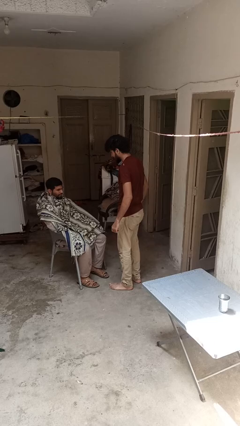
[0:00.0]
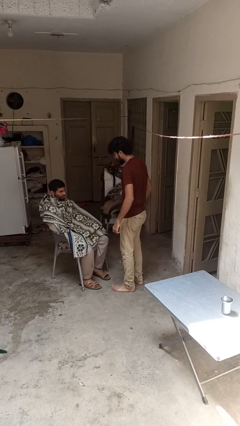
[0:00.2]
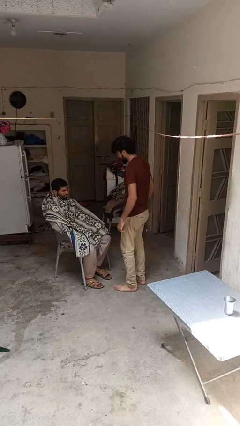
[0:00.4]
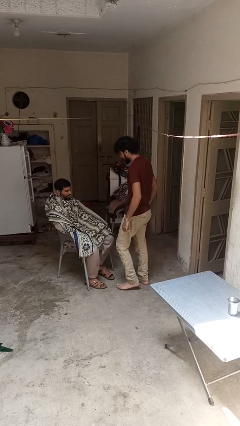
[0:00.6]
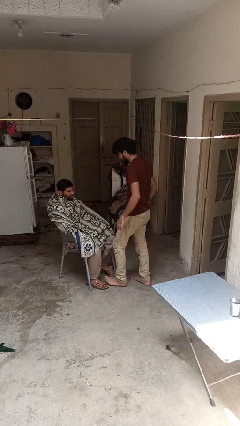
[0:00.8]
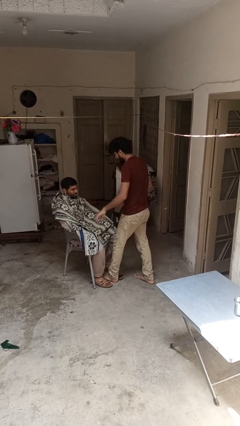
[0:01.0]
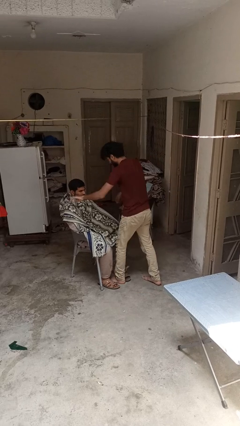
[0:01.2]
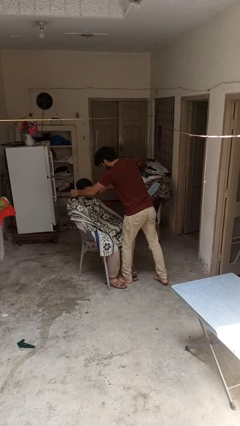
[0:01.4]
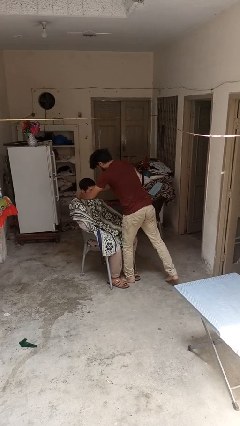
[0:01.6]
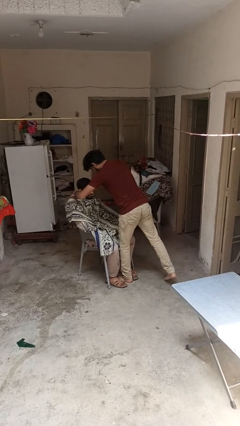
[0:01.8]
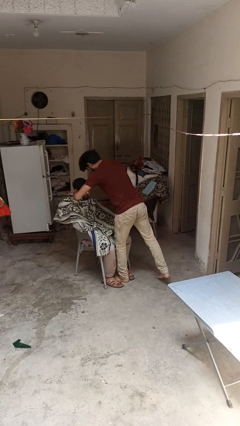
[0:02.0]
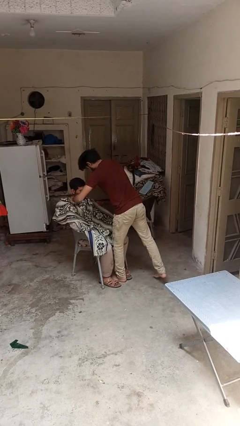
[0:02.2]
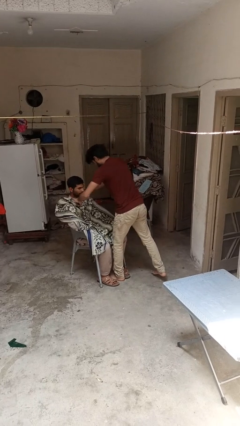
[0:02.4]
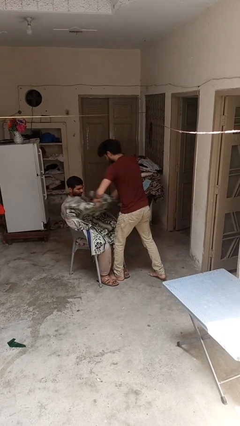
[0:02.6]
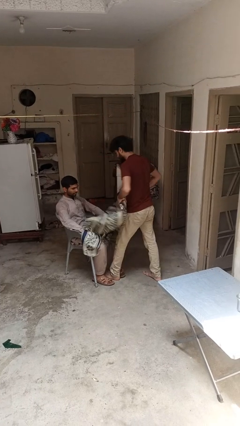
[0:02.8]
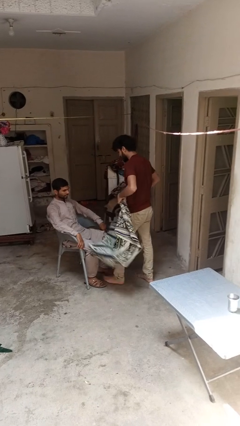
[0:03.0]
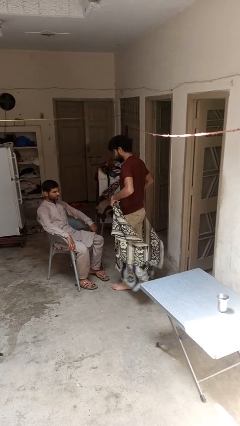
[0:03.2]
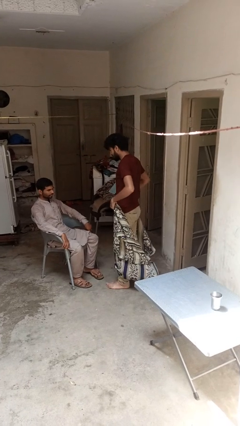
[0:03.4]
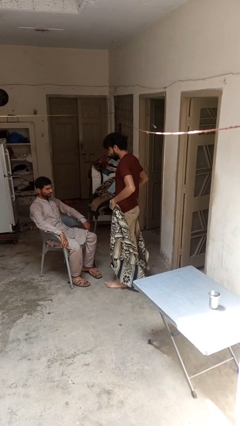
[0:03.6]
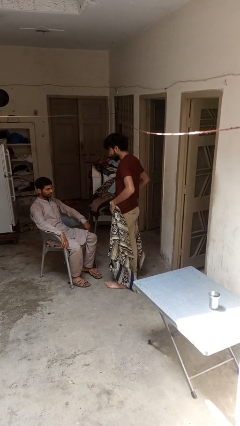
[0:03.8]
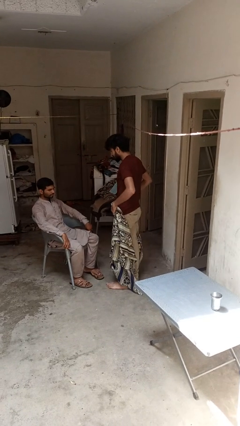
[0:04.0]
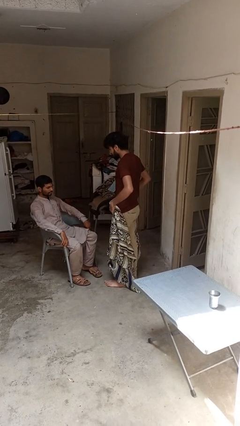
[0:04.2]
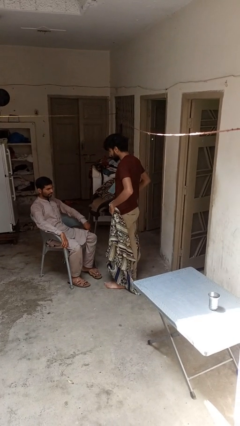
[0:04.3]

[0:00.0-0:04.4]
person uncovers friend with blanket

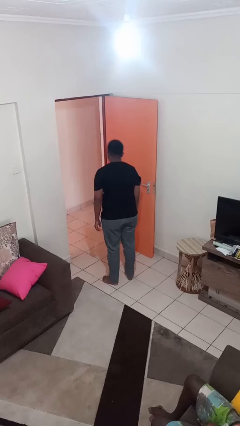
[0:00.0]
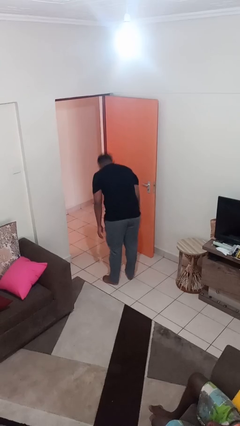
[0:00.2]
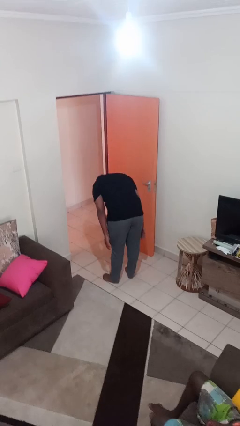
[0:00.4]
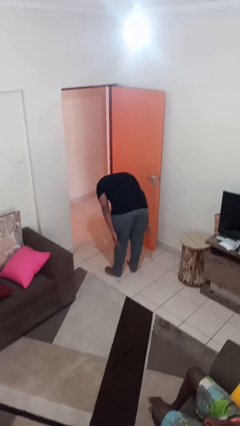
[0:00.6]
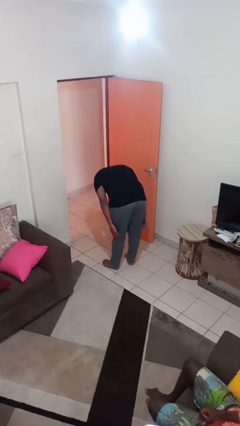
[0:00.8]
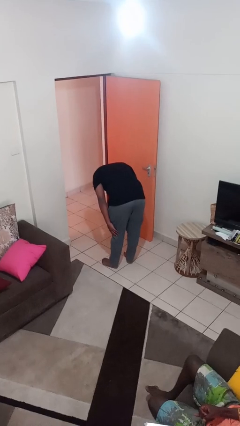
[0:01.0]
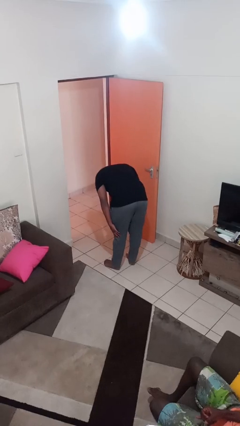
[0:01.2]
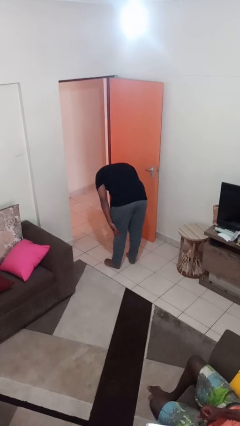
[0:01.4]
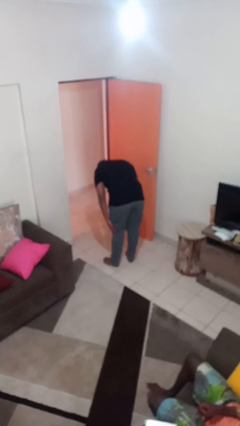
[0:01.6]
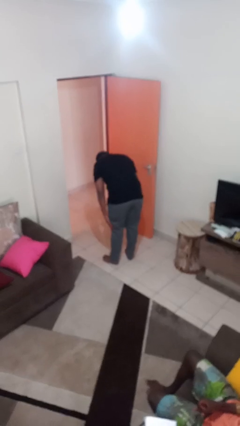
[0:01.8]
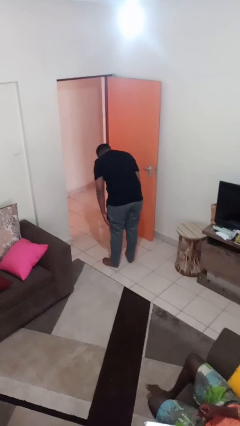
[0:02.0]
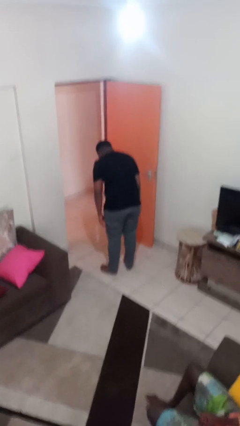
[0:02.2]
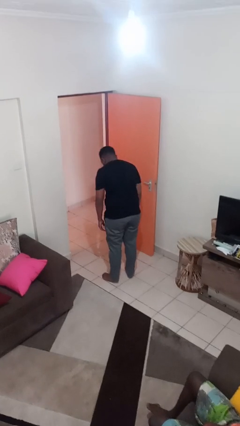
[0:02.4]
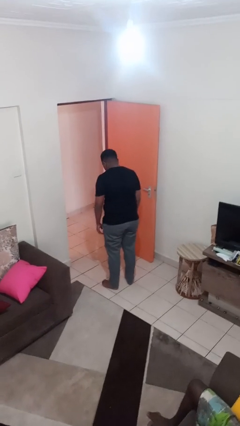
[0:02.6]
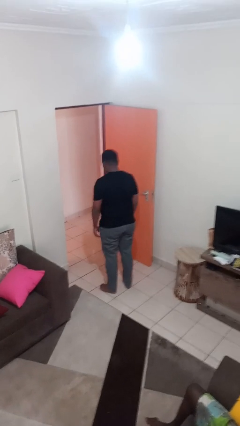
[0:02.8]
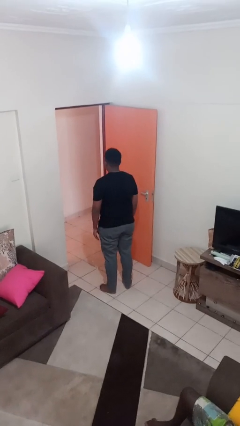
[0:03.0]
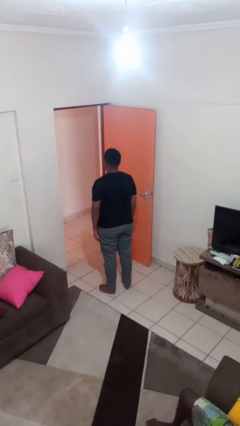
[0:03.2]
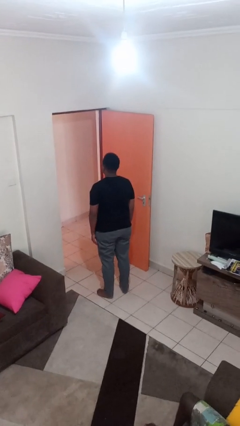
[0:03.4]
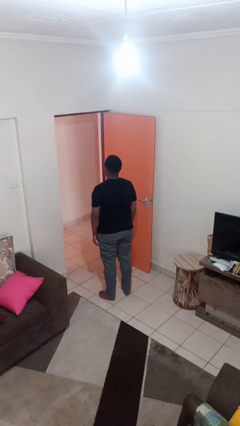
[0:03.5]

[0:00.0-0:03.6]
person bows

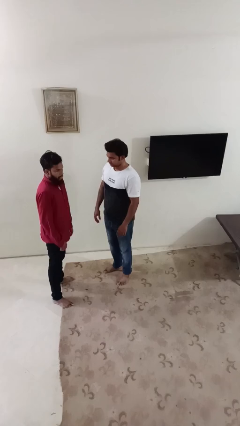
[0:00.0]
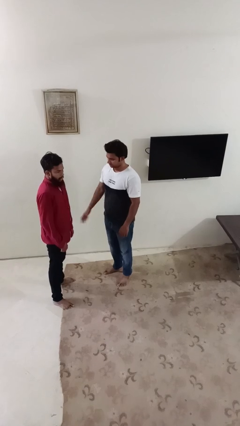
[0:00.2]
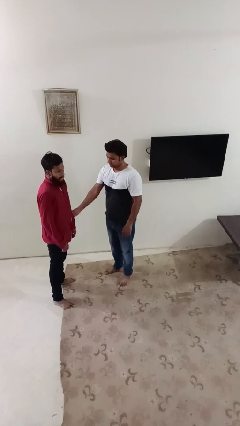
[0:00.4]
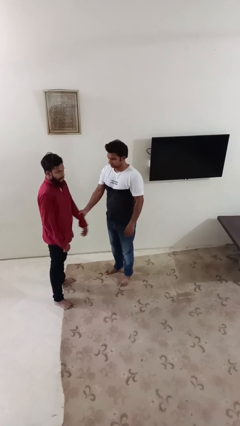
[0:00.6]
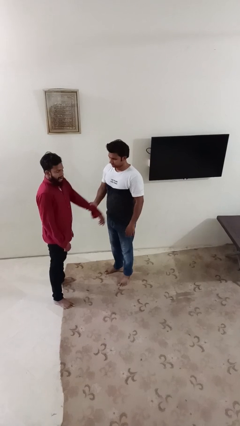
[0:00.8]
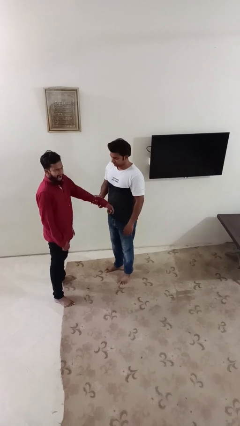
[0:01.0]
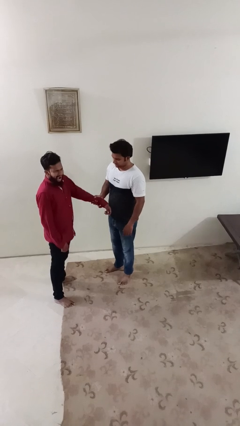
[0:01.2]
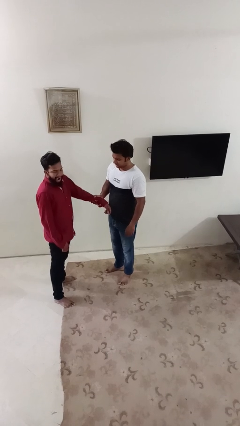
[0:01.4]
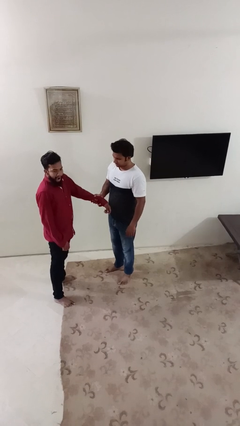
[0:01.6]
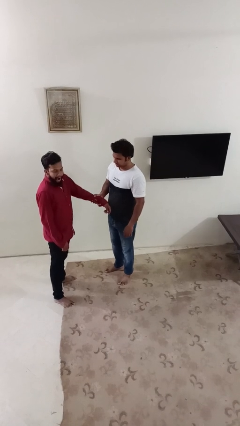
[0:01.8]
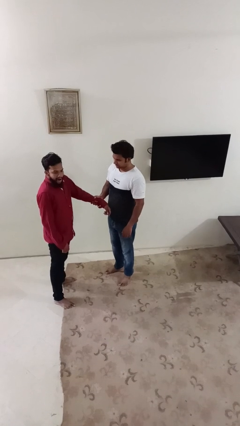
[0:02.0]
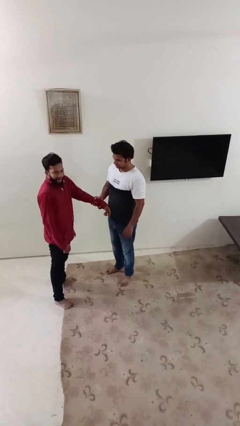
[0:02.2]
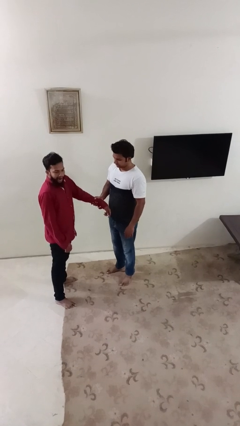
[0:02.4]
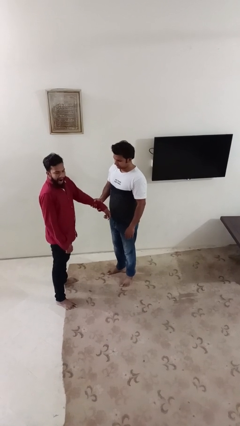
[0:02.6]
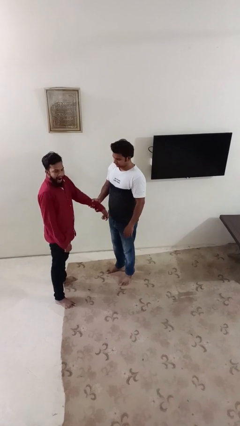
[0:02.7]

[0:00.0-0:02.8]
person grabs person by forearm

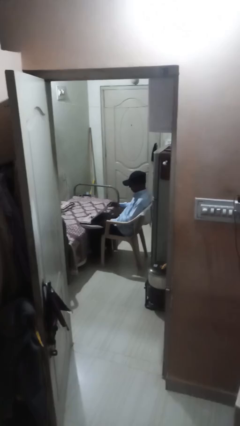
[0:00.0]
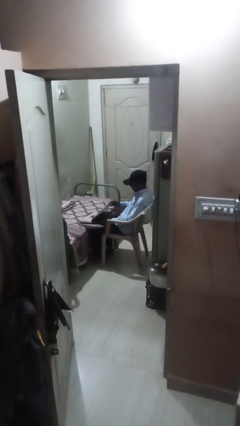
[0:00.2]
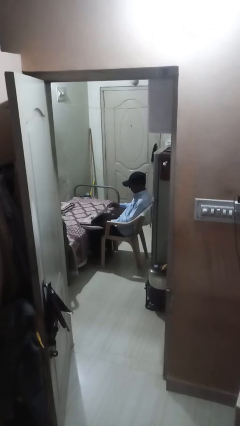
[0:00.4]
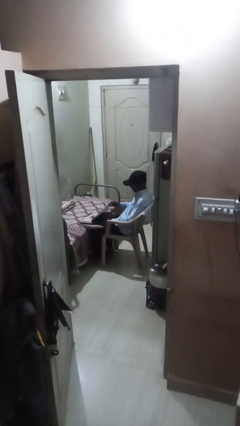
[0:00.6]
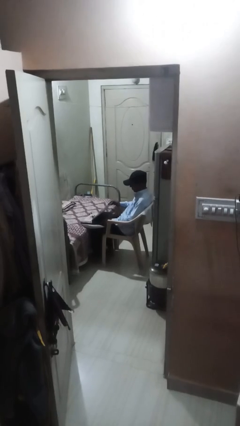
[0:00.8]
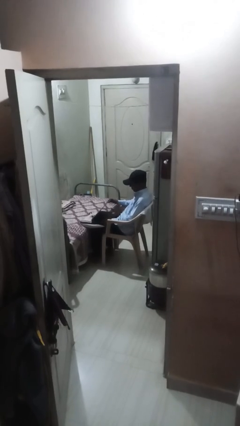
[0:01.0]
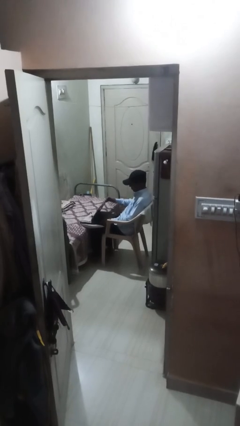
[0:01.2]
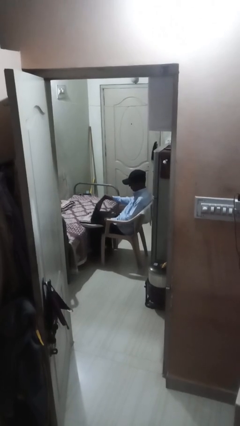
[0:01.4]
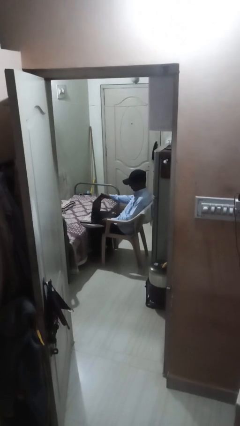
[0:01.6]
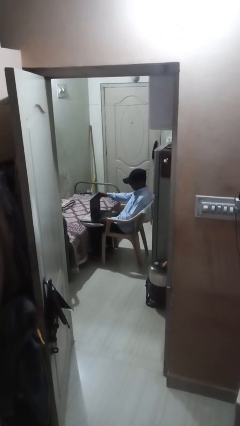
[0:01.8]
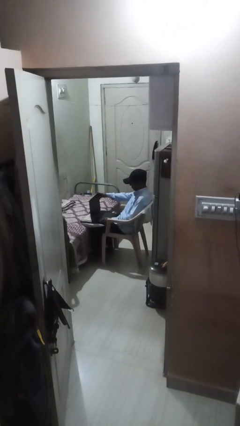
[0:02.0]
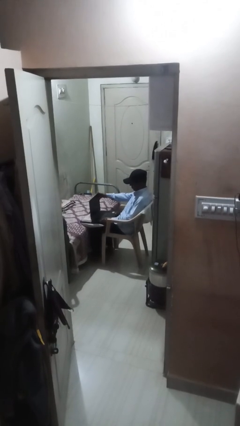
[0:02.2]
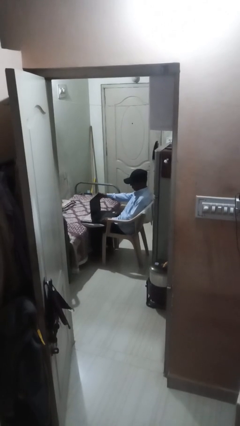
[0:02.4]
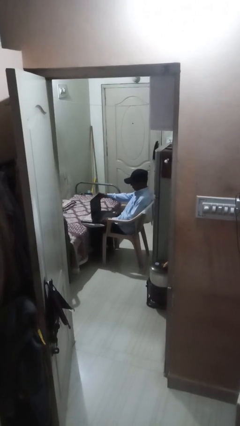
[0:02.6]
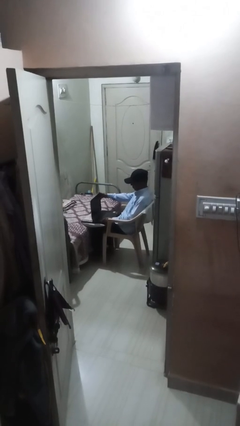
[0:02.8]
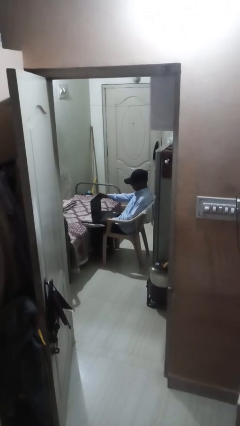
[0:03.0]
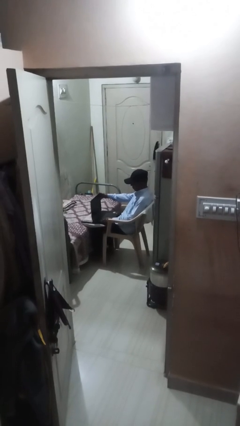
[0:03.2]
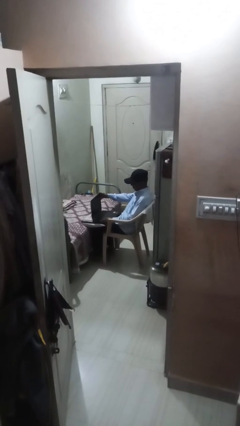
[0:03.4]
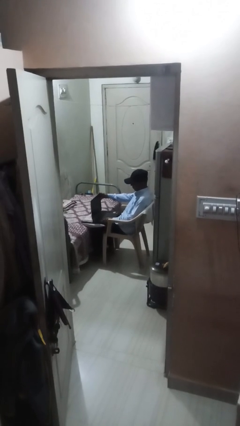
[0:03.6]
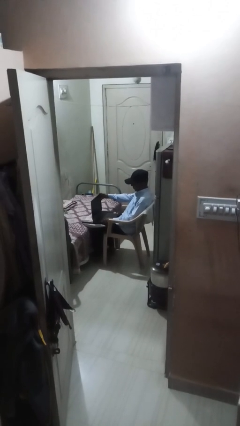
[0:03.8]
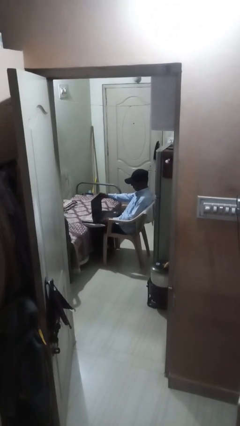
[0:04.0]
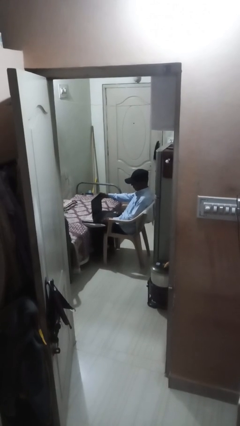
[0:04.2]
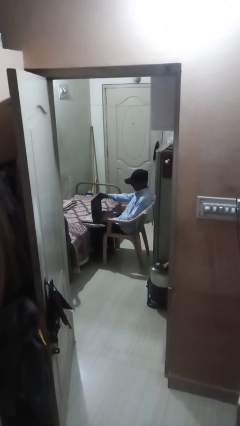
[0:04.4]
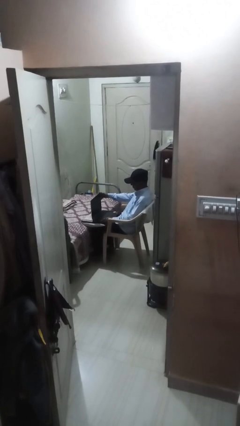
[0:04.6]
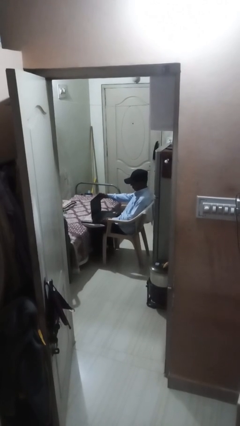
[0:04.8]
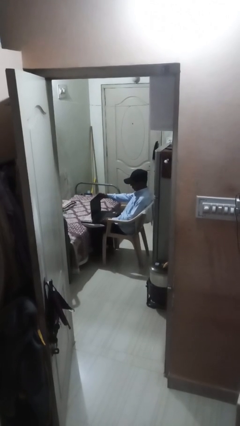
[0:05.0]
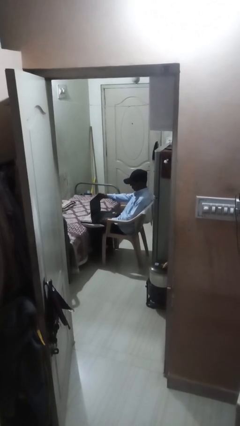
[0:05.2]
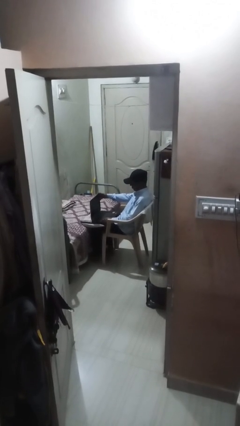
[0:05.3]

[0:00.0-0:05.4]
person interacts with laptop

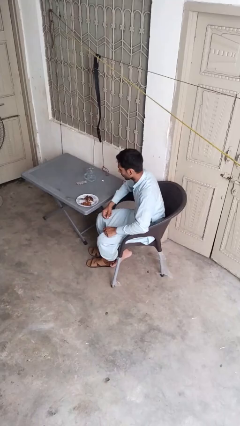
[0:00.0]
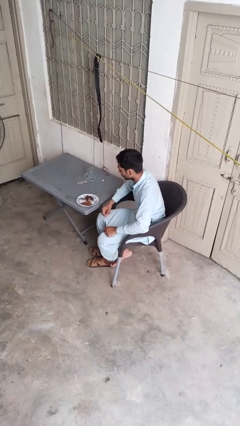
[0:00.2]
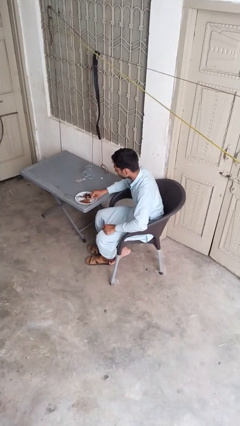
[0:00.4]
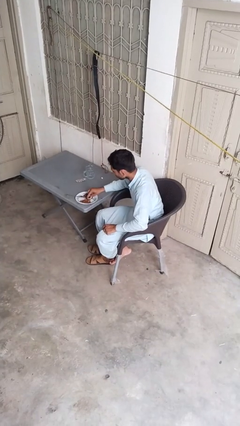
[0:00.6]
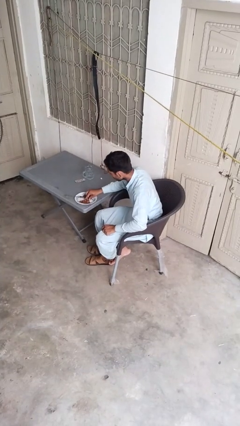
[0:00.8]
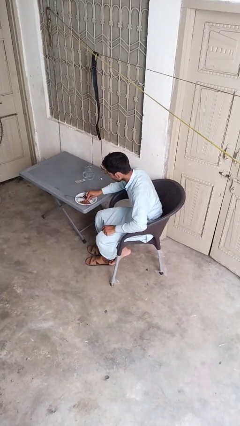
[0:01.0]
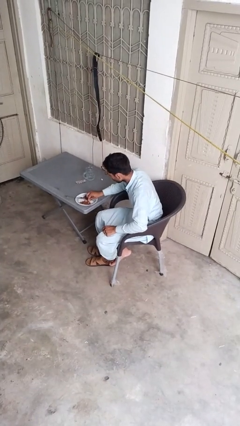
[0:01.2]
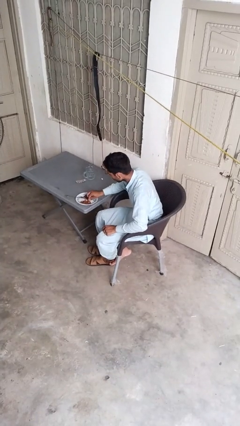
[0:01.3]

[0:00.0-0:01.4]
person eats with hands

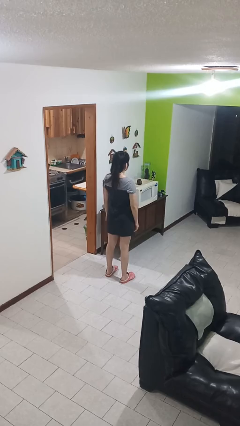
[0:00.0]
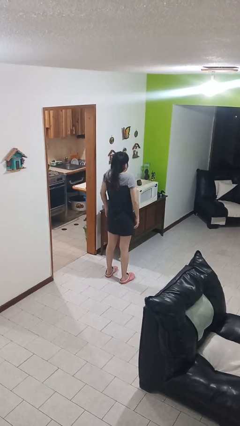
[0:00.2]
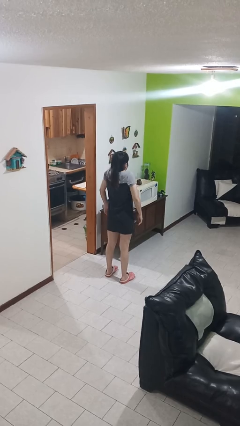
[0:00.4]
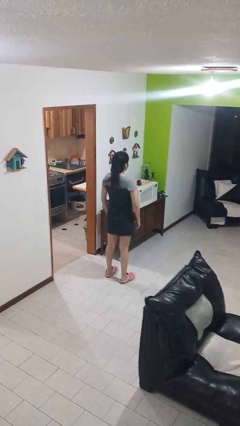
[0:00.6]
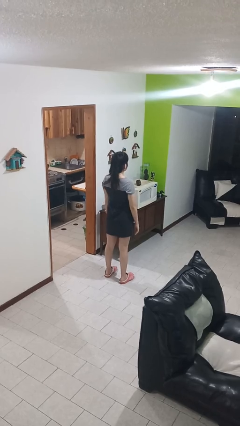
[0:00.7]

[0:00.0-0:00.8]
person shrugs
